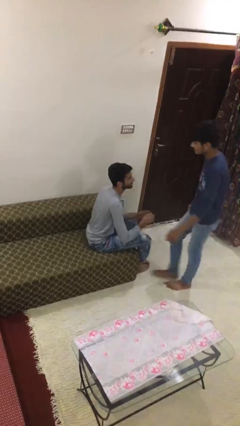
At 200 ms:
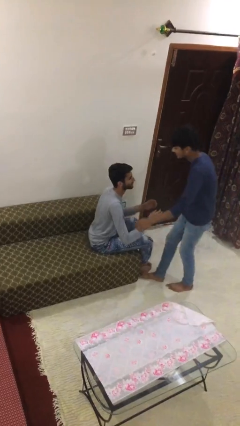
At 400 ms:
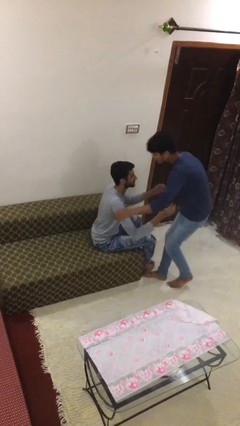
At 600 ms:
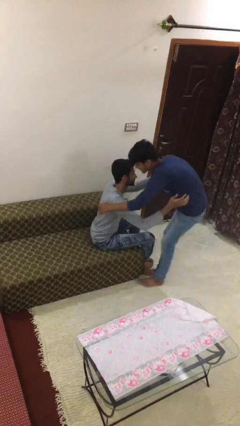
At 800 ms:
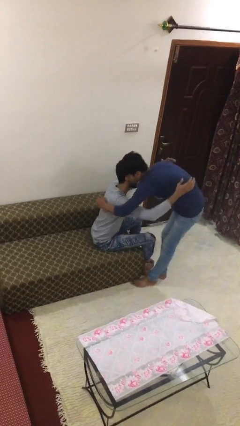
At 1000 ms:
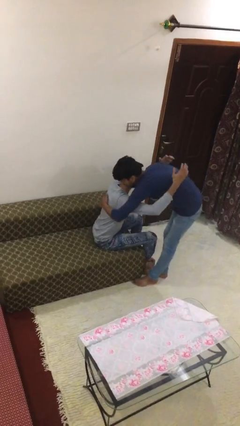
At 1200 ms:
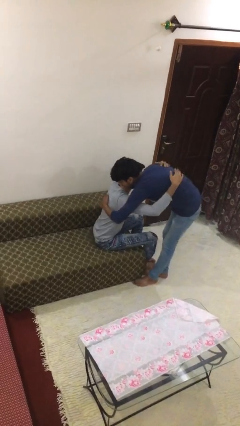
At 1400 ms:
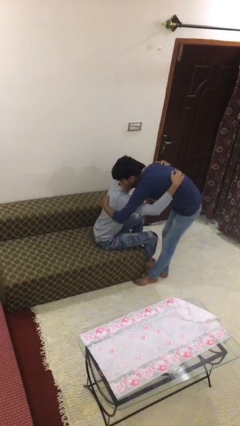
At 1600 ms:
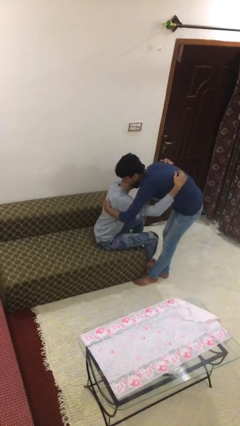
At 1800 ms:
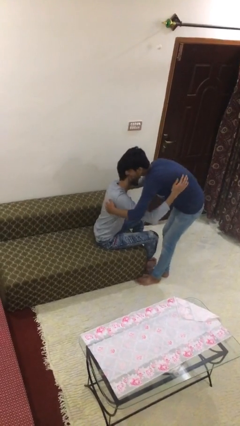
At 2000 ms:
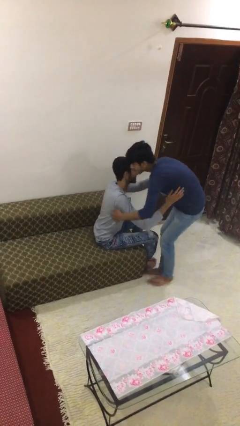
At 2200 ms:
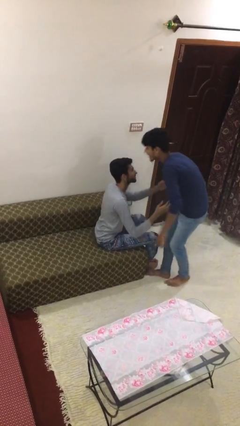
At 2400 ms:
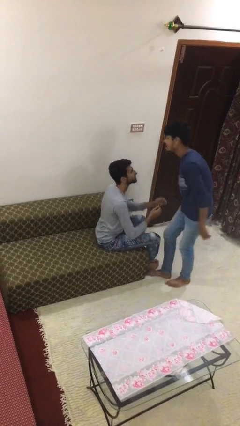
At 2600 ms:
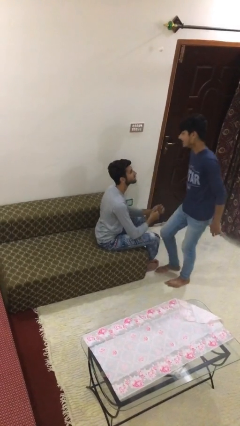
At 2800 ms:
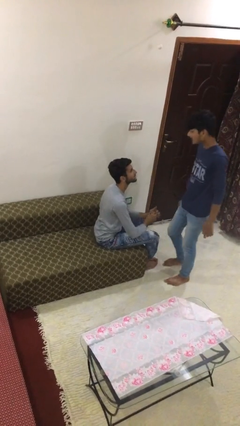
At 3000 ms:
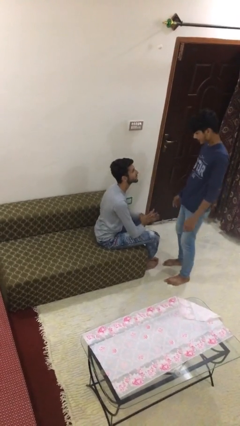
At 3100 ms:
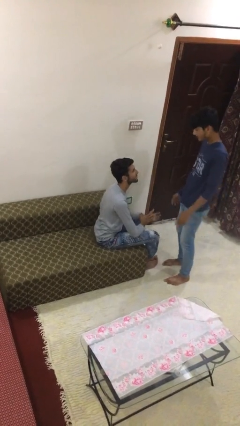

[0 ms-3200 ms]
person embraces person

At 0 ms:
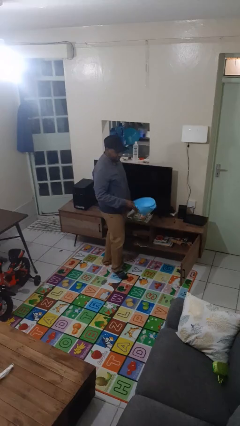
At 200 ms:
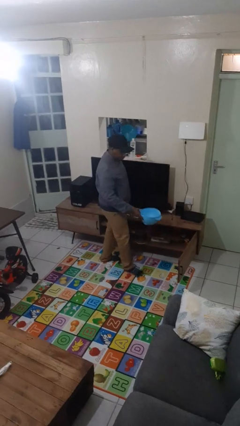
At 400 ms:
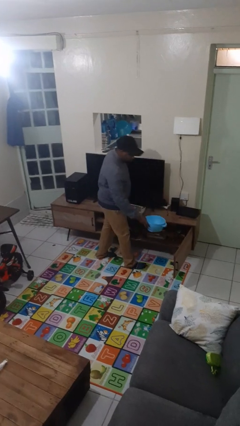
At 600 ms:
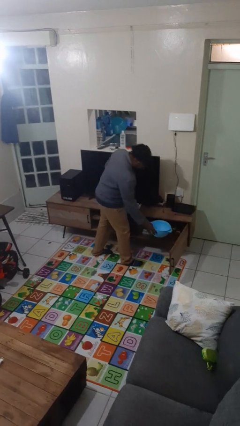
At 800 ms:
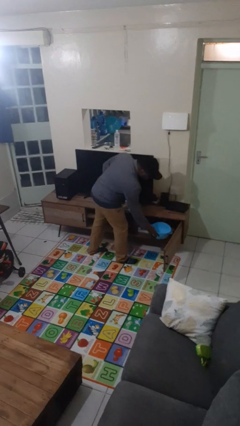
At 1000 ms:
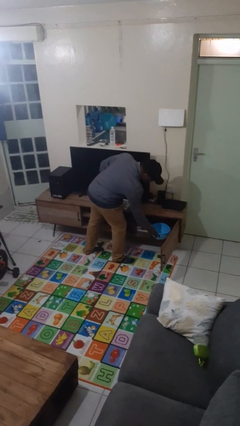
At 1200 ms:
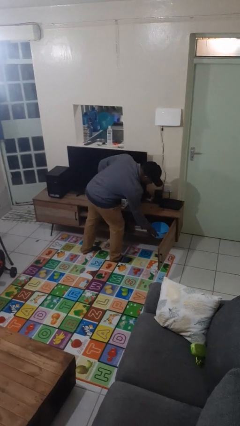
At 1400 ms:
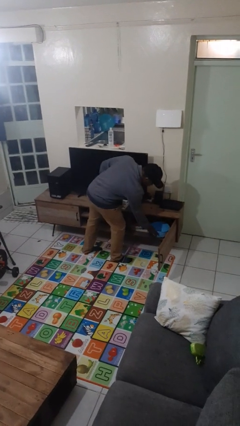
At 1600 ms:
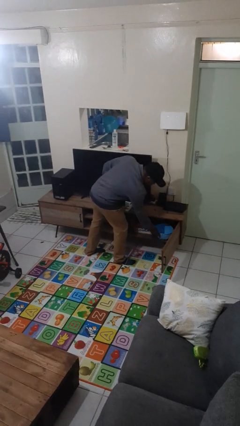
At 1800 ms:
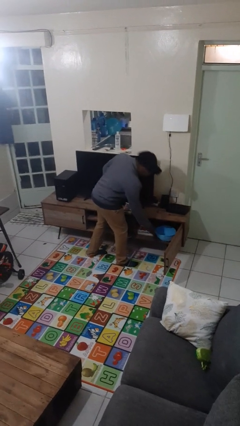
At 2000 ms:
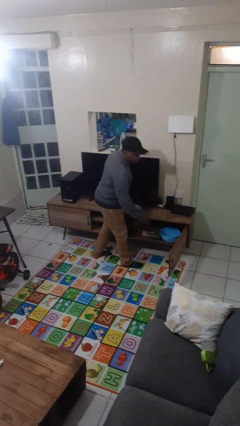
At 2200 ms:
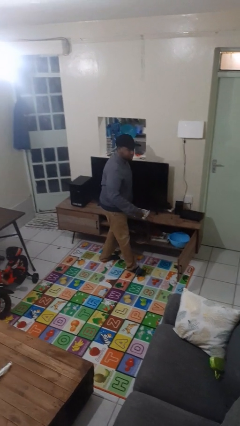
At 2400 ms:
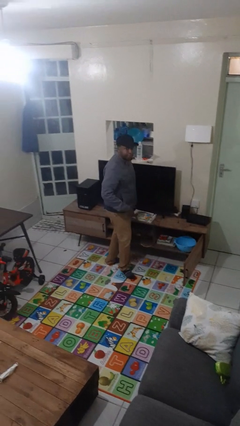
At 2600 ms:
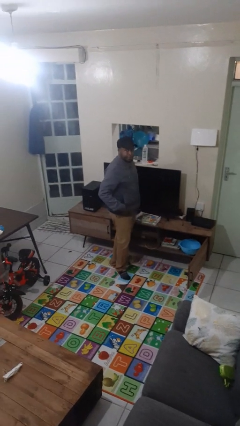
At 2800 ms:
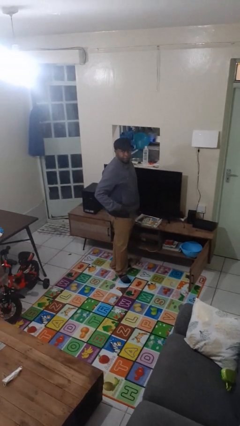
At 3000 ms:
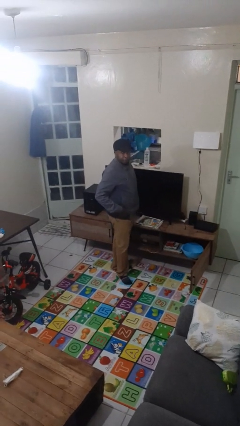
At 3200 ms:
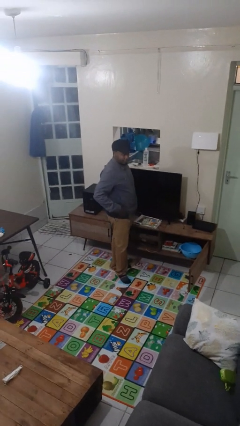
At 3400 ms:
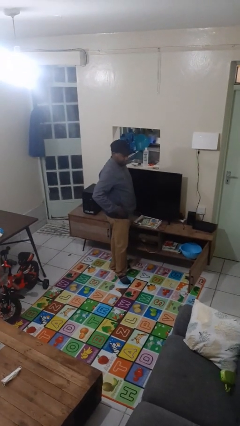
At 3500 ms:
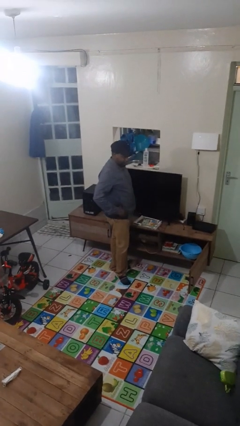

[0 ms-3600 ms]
person puts down object into cabinet

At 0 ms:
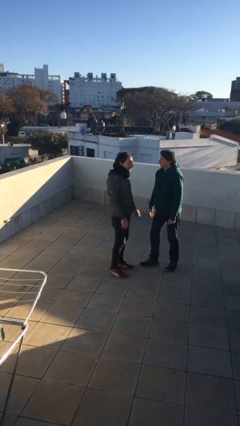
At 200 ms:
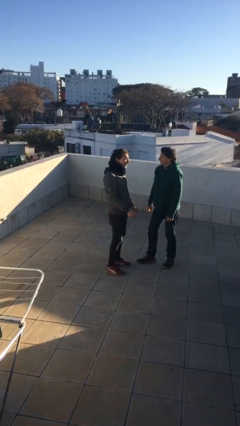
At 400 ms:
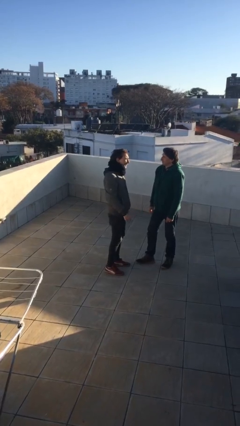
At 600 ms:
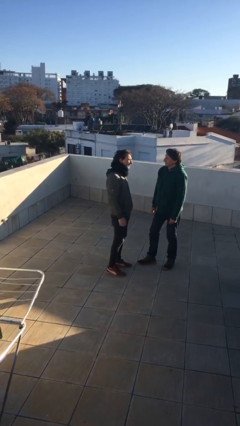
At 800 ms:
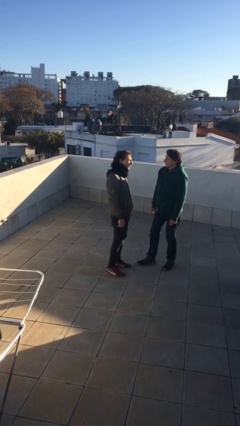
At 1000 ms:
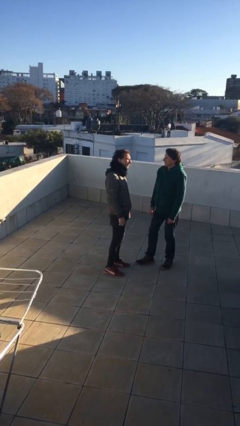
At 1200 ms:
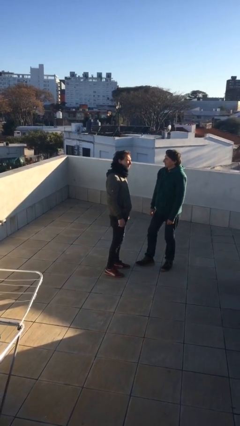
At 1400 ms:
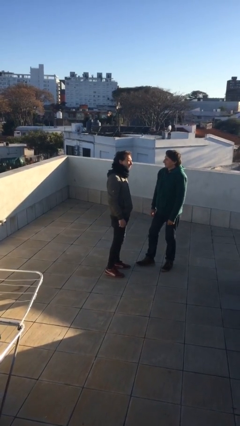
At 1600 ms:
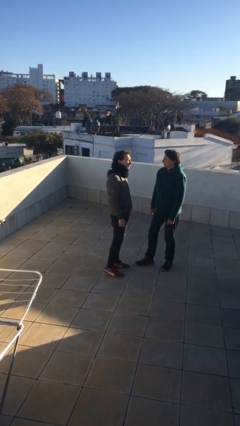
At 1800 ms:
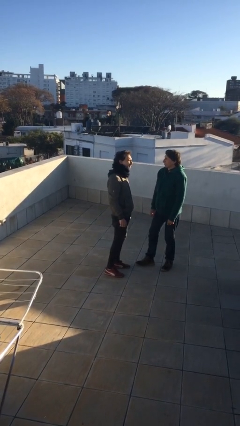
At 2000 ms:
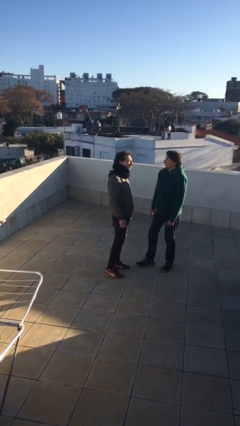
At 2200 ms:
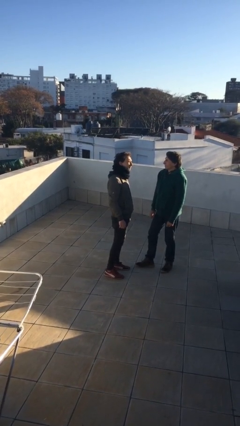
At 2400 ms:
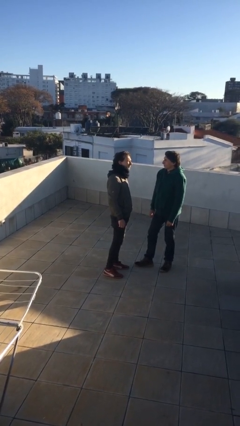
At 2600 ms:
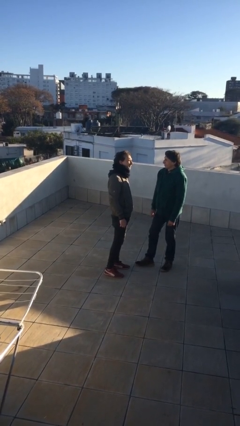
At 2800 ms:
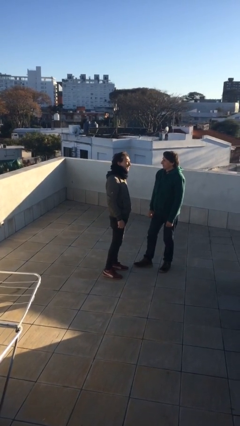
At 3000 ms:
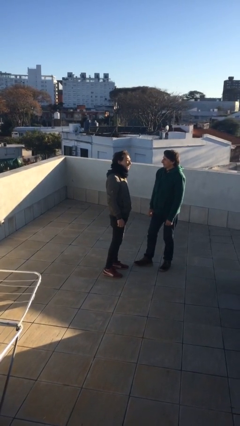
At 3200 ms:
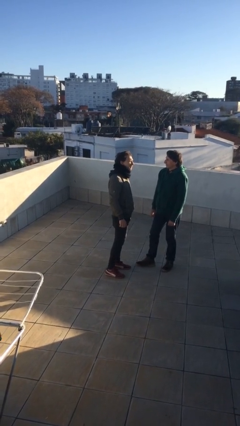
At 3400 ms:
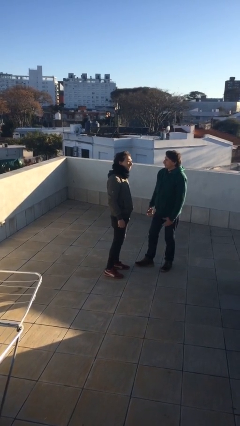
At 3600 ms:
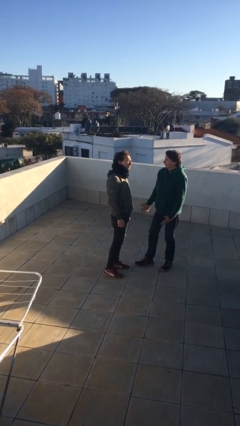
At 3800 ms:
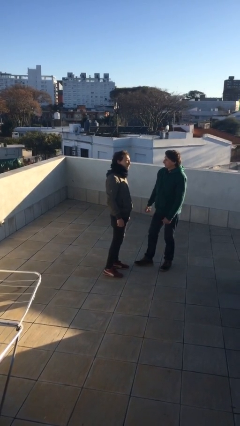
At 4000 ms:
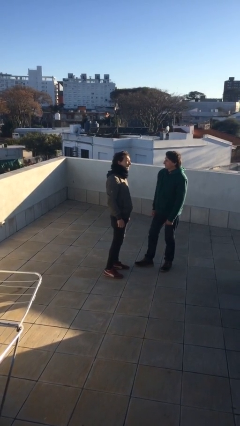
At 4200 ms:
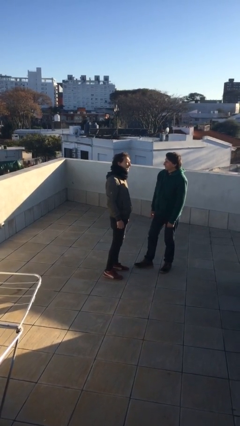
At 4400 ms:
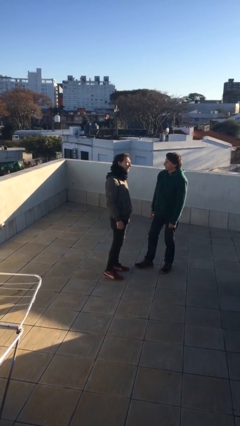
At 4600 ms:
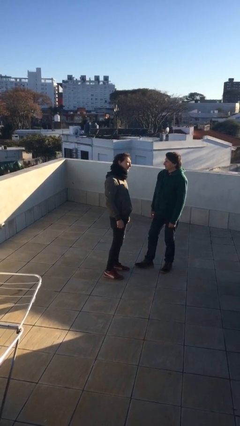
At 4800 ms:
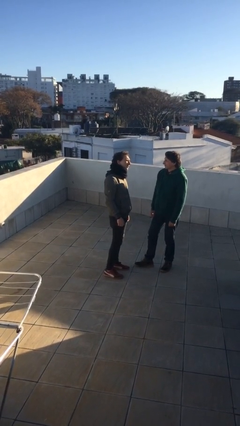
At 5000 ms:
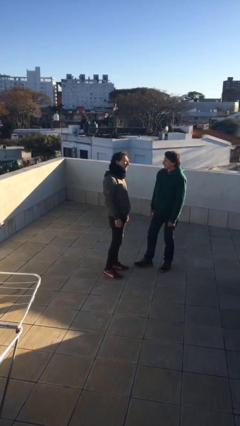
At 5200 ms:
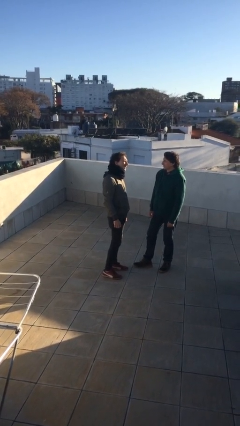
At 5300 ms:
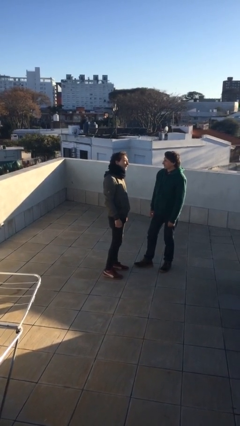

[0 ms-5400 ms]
person talks to person

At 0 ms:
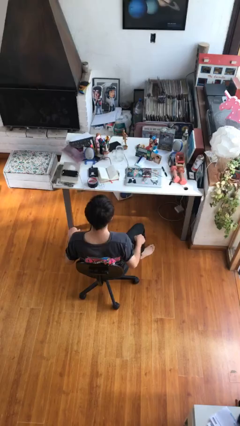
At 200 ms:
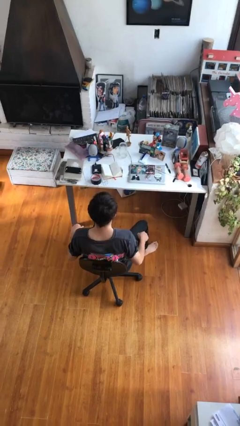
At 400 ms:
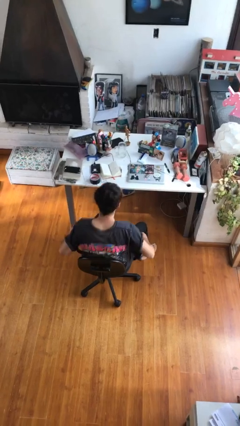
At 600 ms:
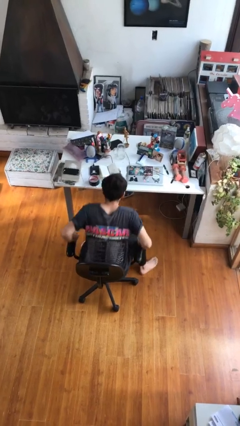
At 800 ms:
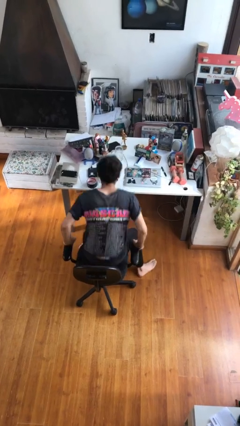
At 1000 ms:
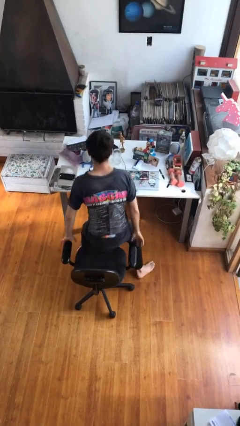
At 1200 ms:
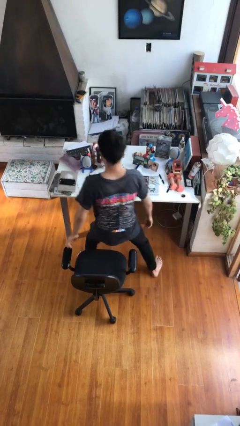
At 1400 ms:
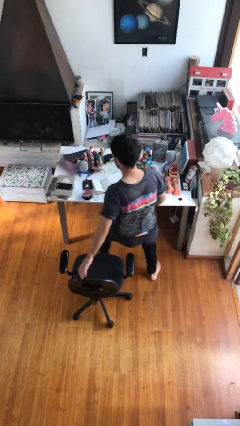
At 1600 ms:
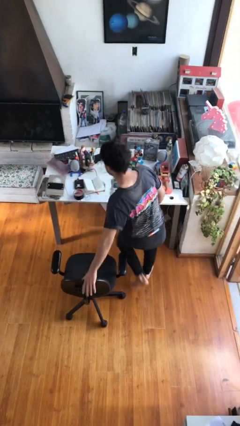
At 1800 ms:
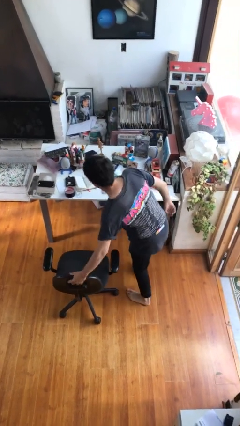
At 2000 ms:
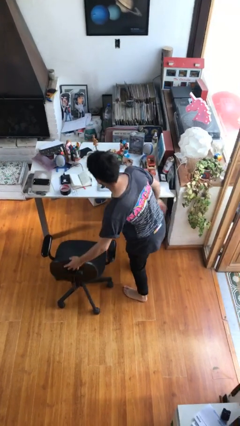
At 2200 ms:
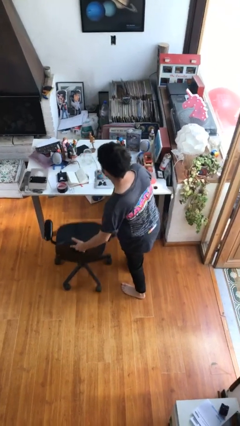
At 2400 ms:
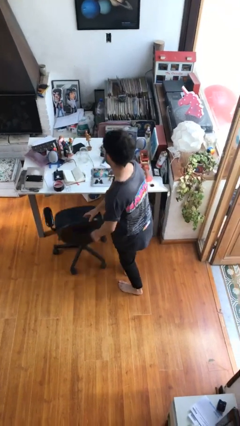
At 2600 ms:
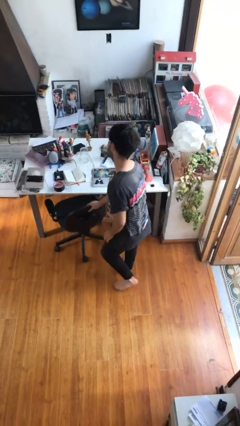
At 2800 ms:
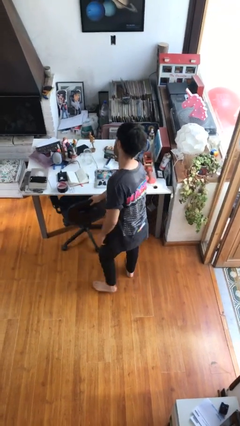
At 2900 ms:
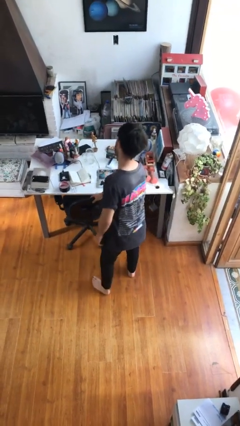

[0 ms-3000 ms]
person stands up

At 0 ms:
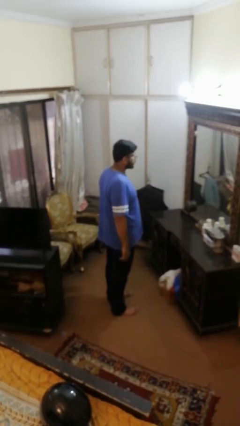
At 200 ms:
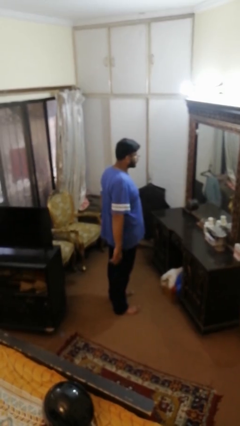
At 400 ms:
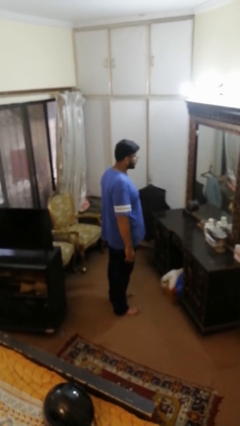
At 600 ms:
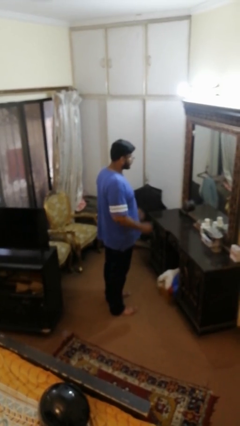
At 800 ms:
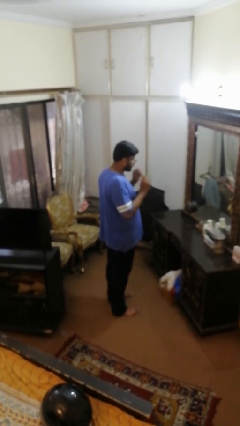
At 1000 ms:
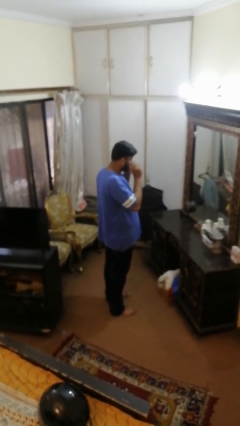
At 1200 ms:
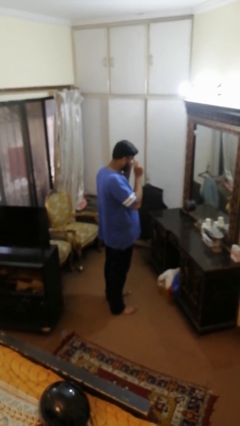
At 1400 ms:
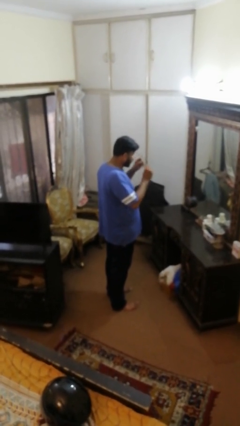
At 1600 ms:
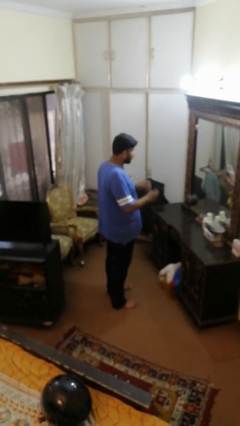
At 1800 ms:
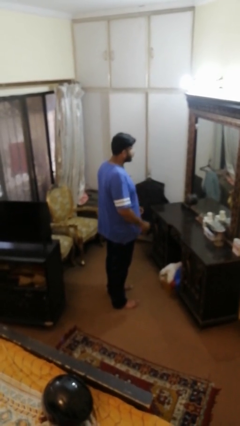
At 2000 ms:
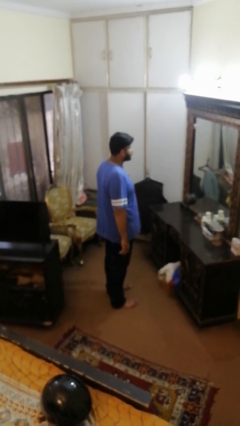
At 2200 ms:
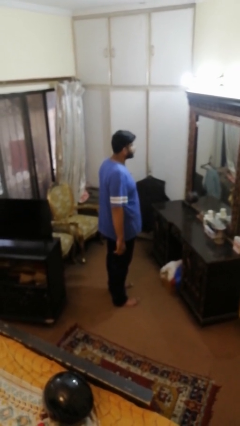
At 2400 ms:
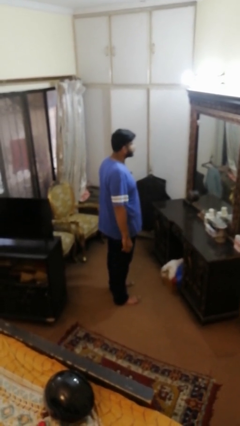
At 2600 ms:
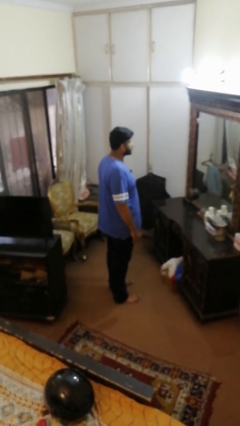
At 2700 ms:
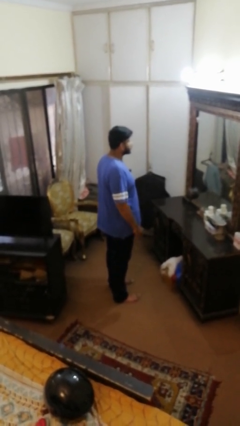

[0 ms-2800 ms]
person takes off glasses
